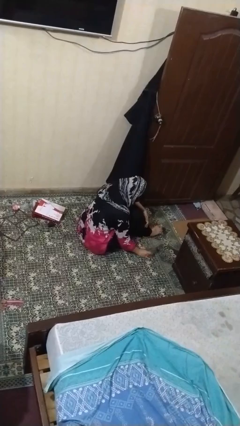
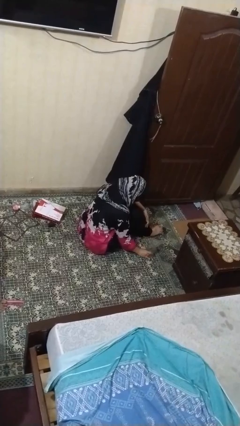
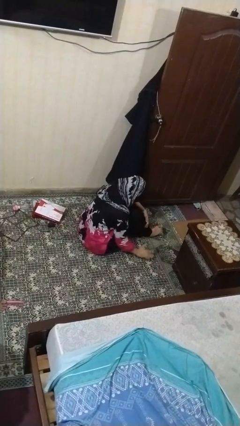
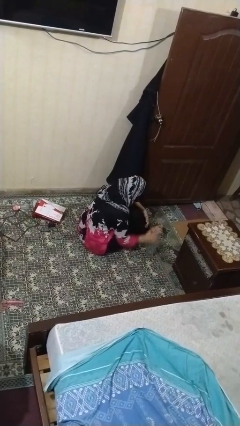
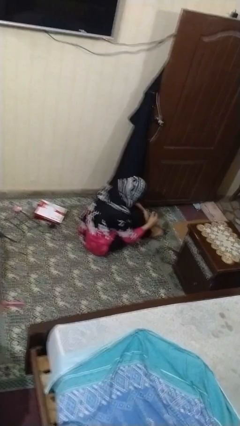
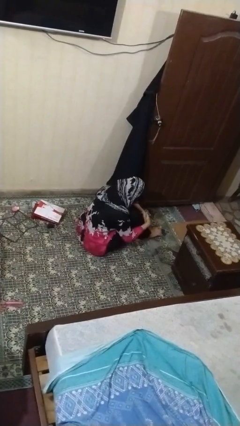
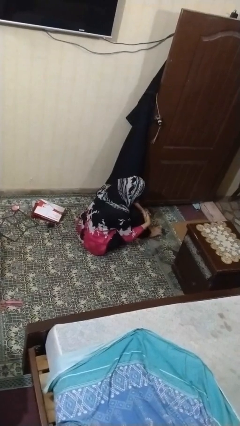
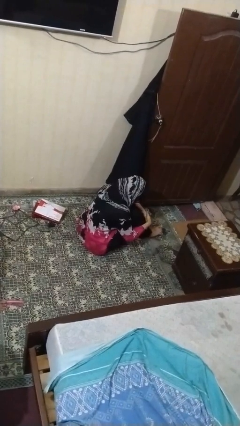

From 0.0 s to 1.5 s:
person sets upright glass

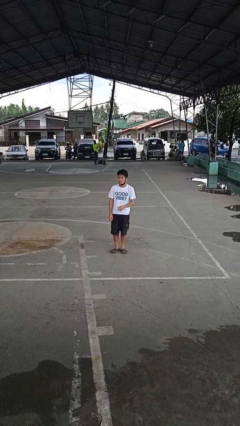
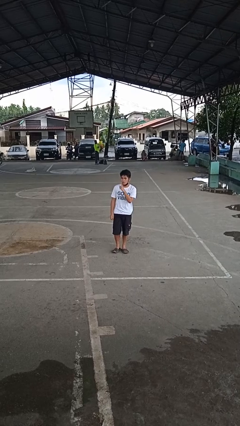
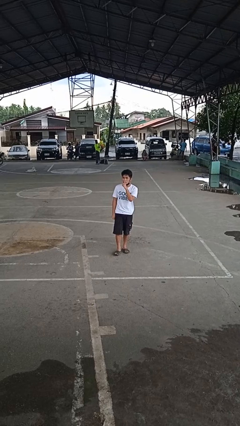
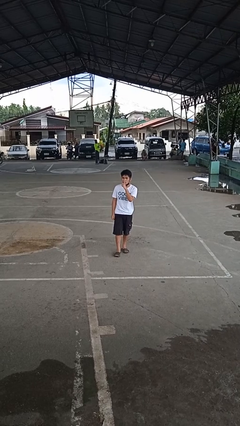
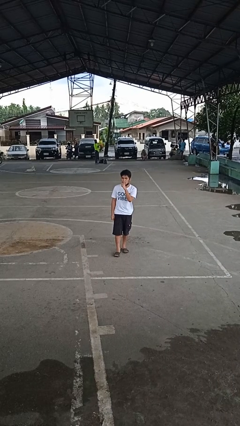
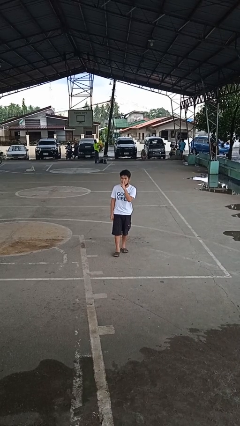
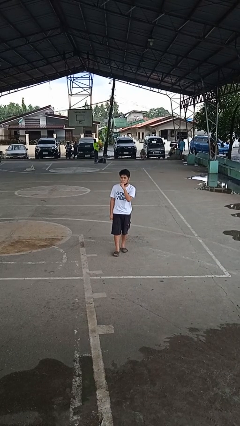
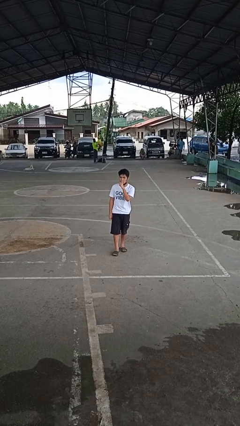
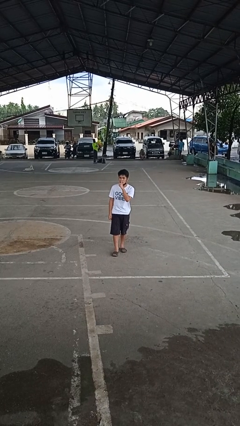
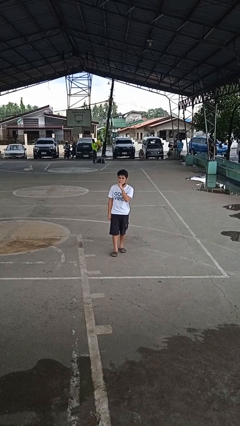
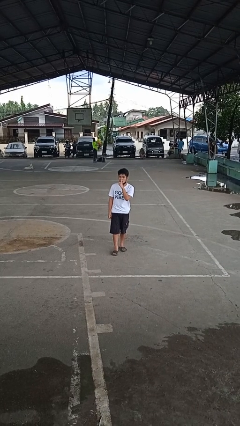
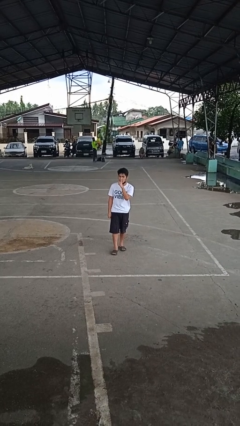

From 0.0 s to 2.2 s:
person gestures be quiet

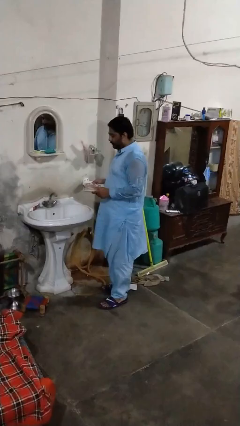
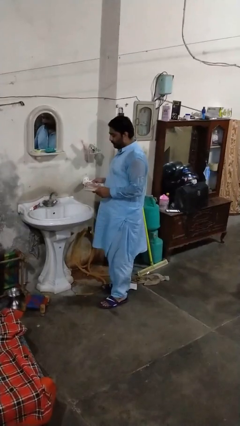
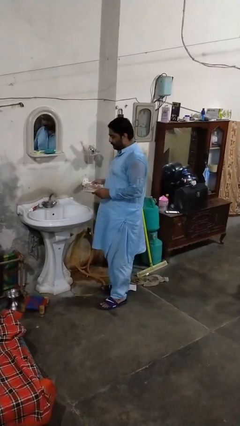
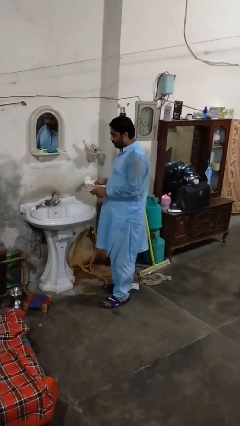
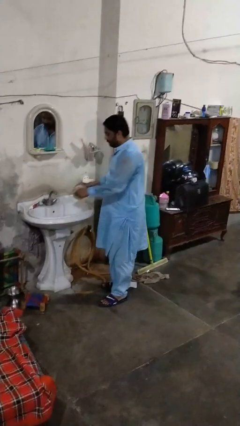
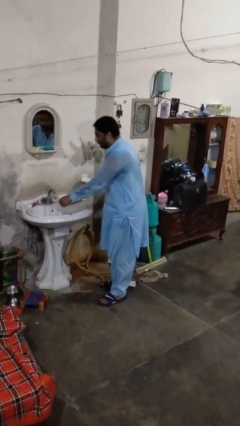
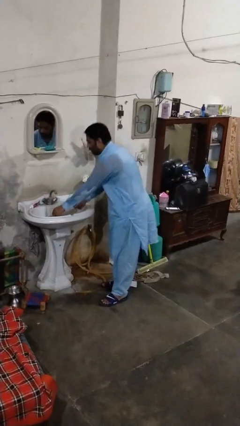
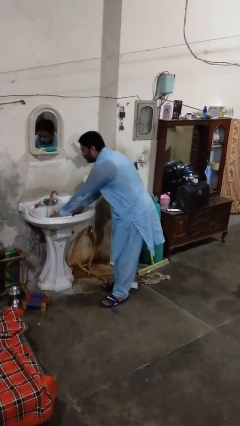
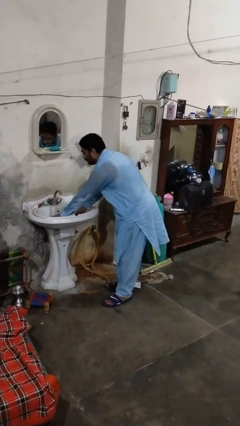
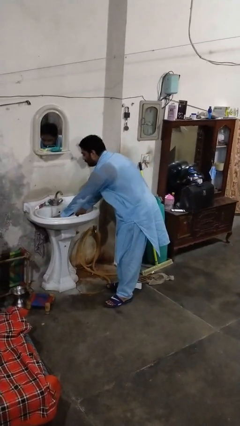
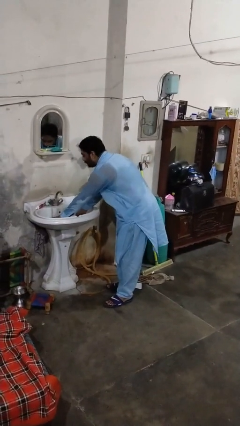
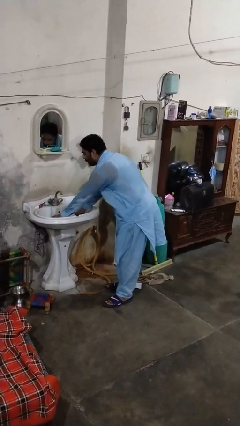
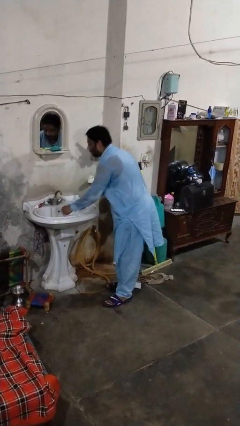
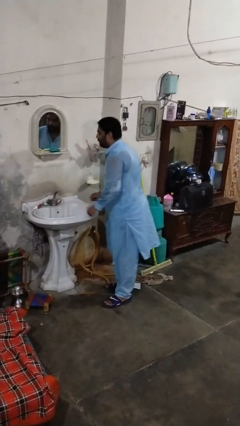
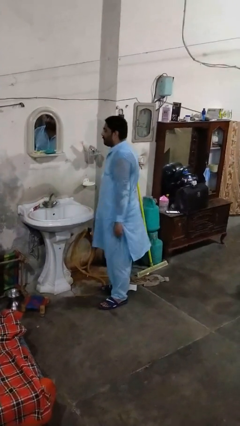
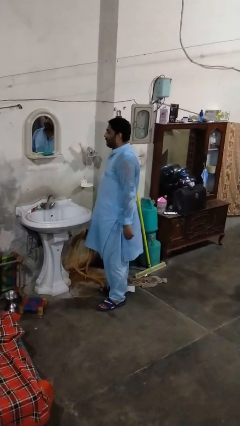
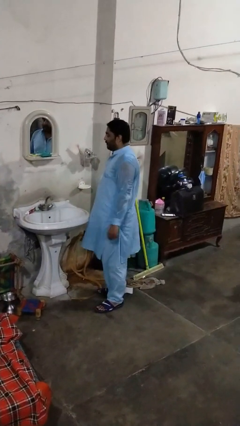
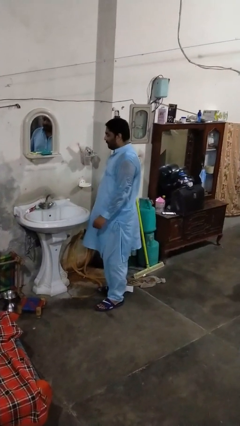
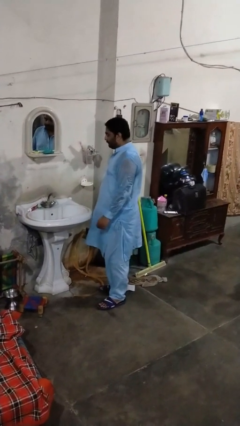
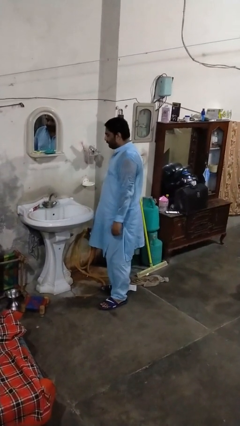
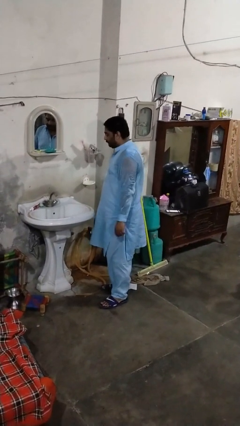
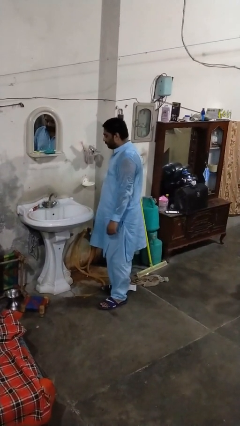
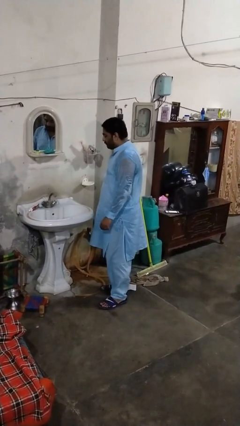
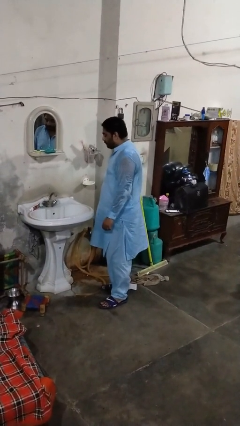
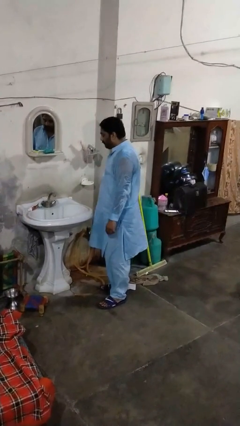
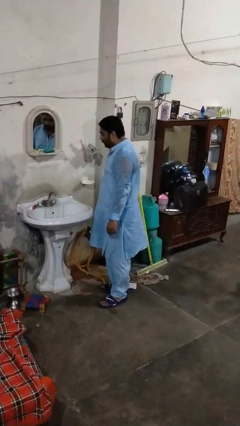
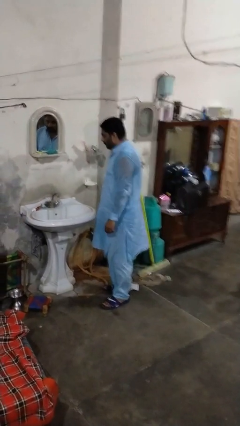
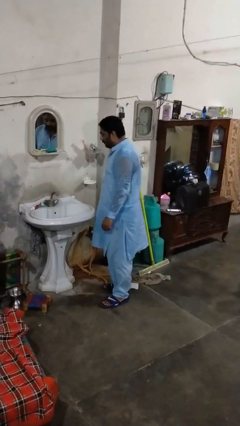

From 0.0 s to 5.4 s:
person loads dishwasher

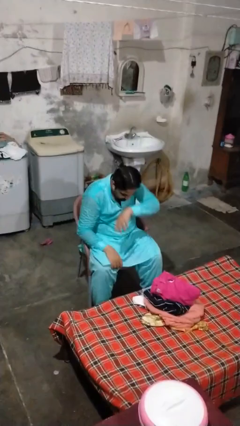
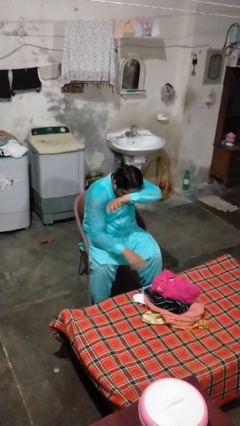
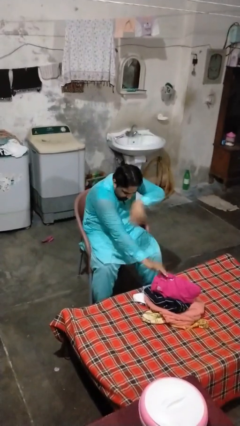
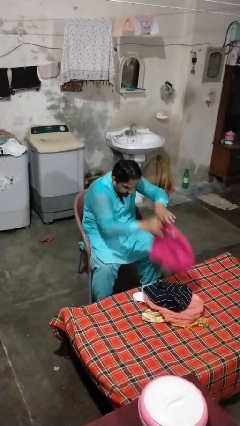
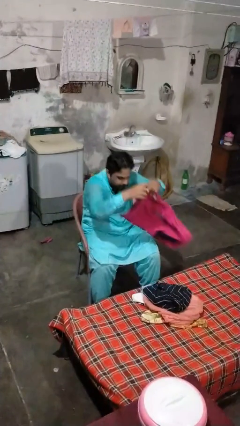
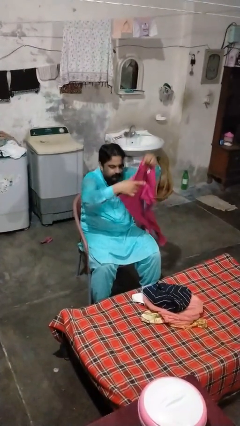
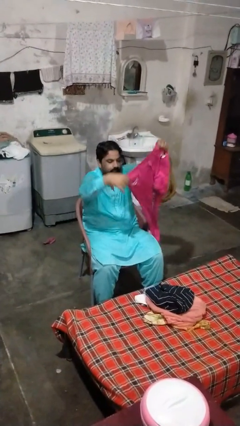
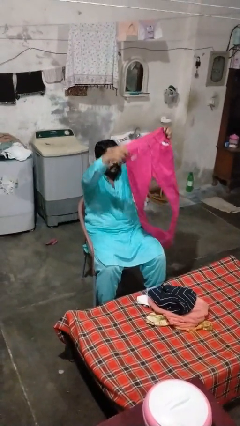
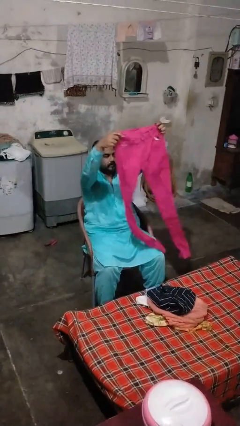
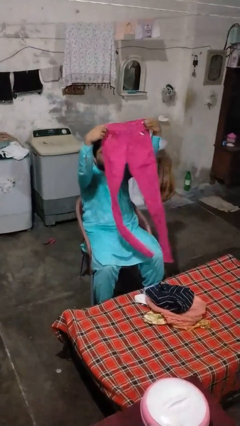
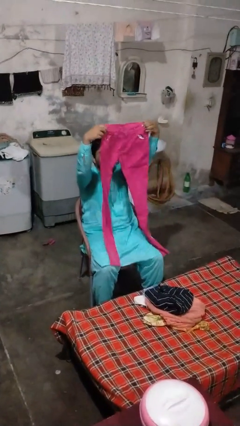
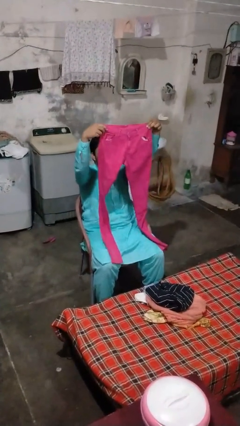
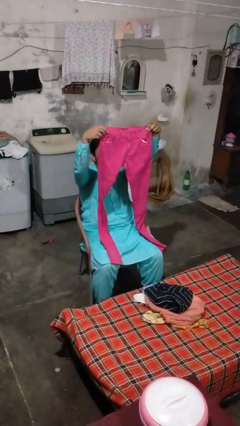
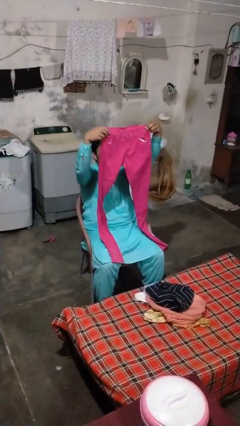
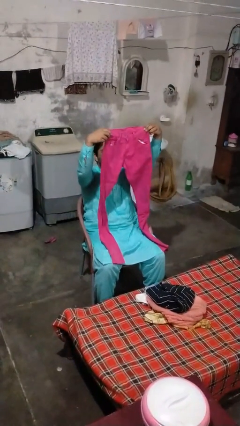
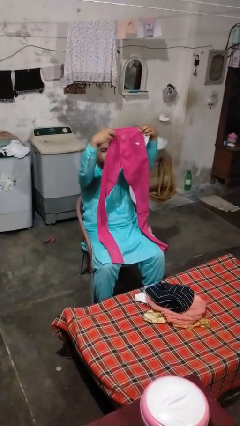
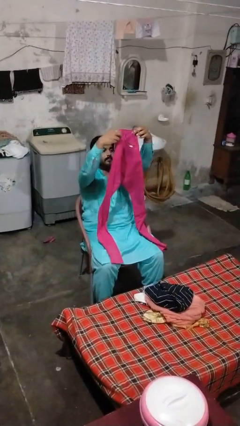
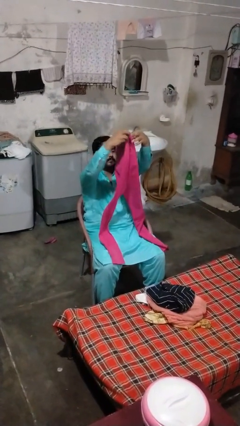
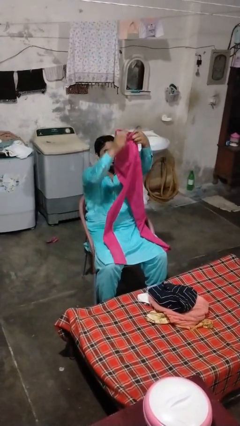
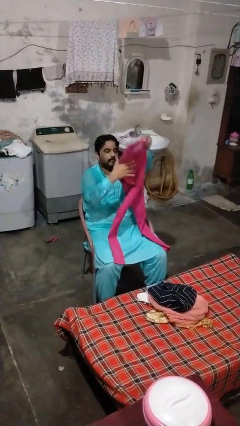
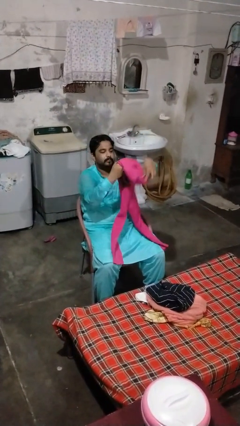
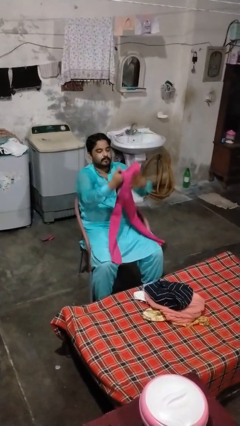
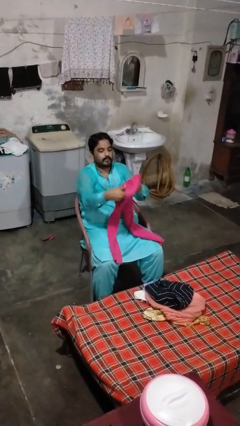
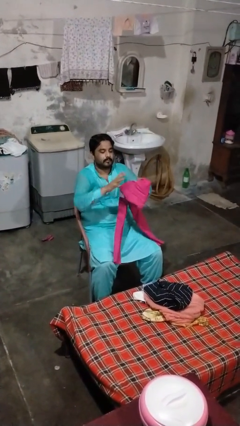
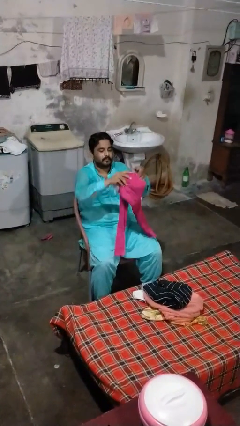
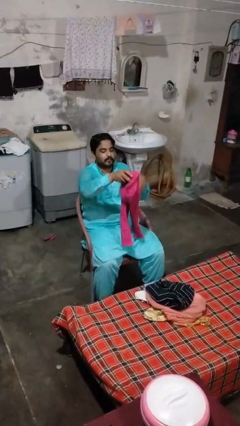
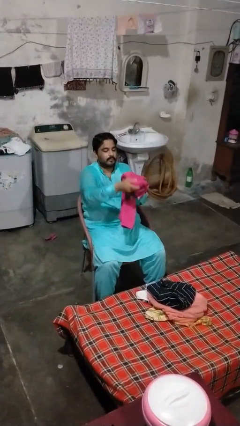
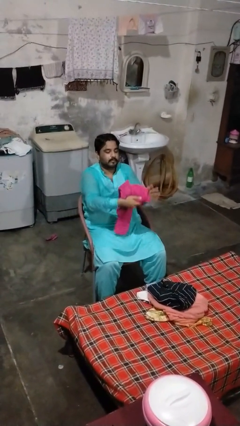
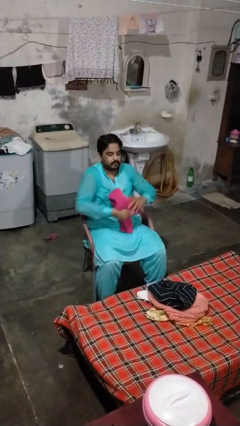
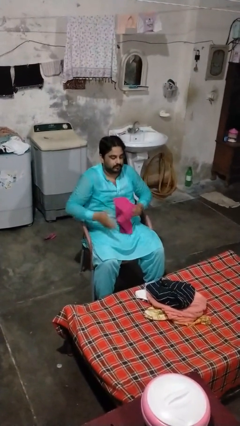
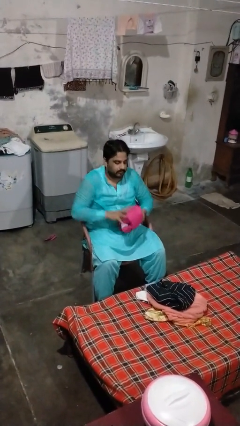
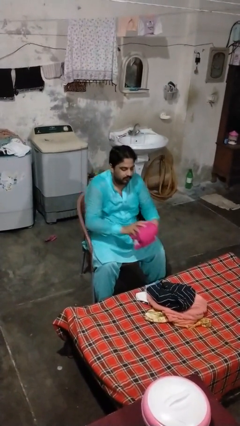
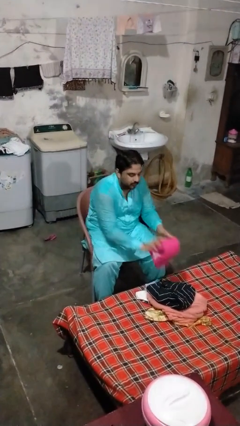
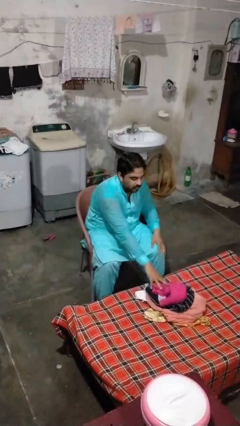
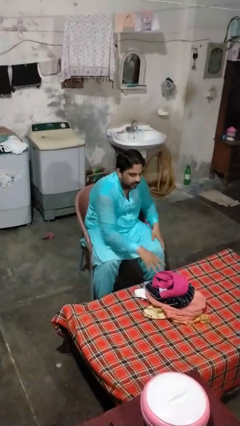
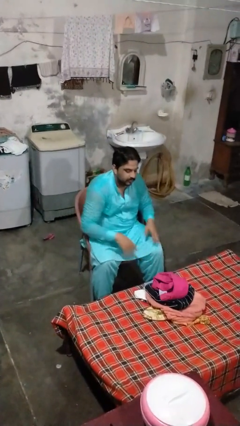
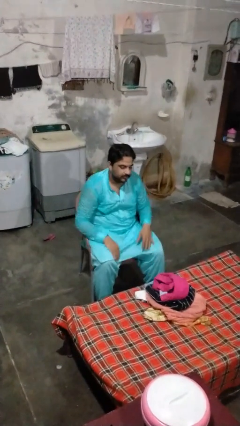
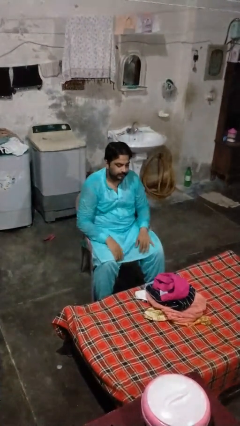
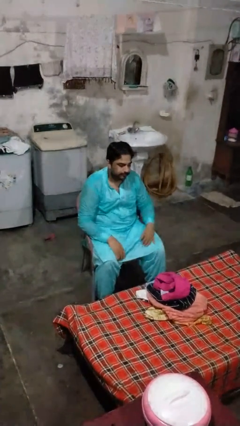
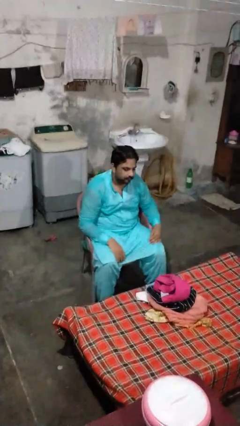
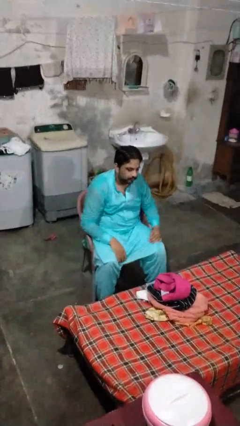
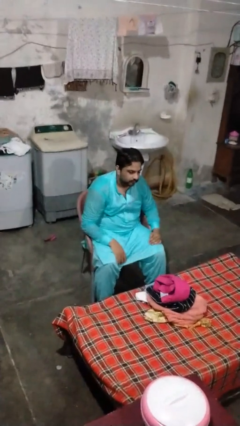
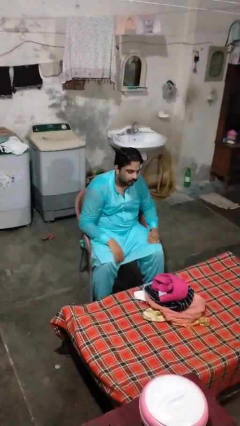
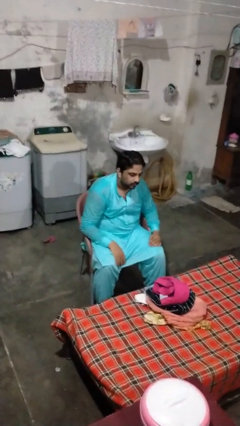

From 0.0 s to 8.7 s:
person folds pants
